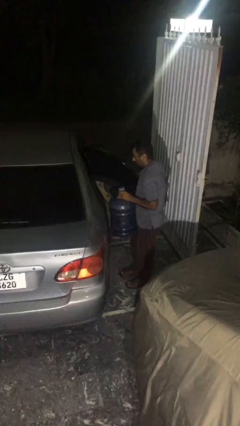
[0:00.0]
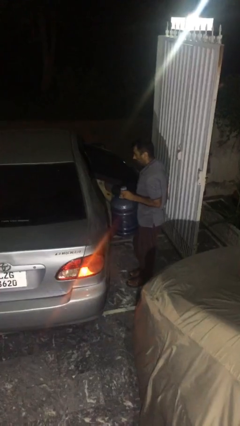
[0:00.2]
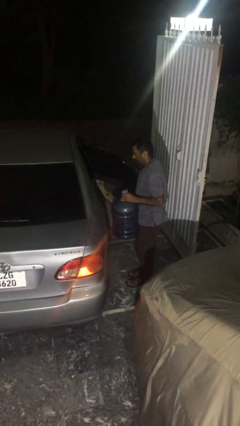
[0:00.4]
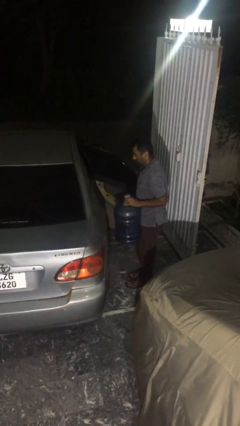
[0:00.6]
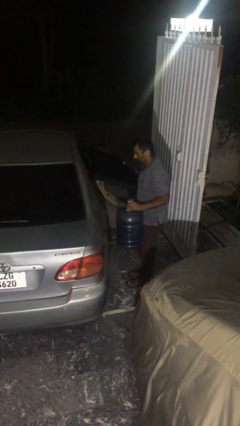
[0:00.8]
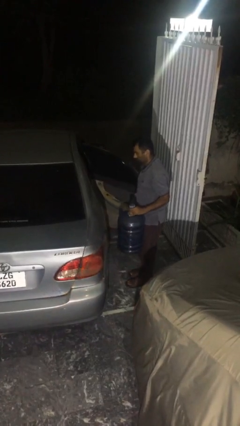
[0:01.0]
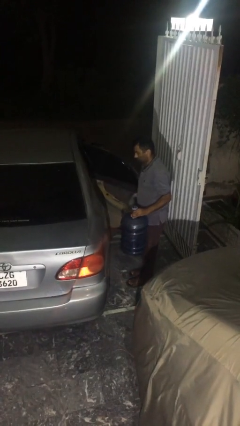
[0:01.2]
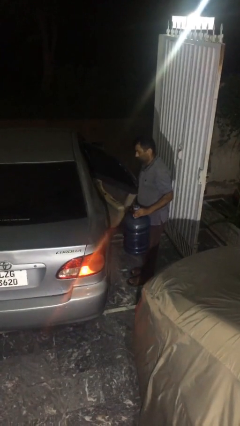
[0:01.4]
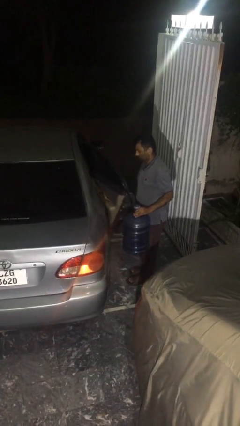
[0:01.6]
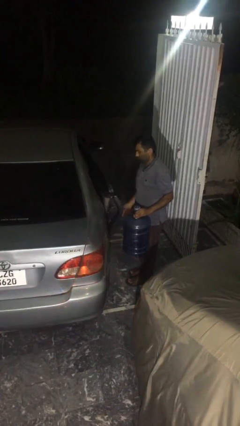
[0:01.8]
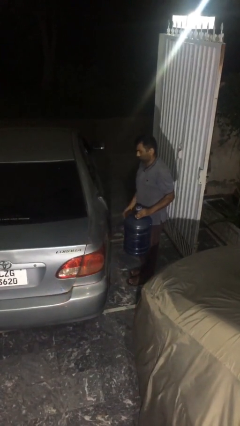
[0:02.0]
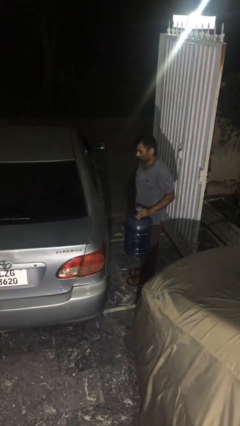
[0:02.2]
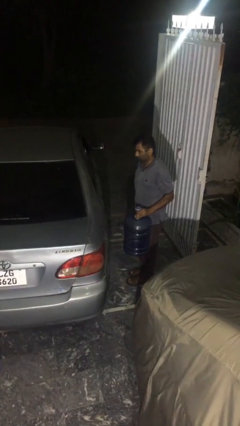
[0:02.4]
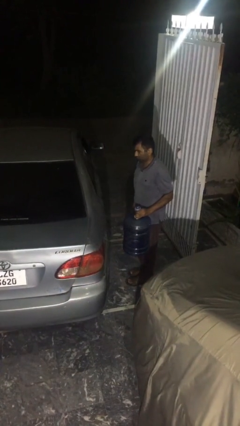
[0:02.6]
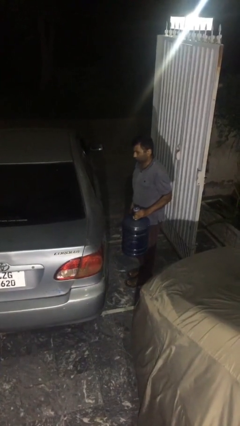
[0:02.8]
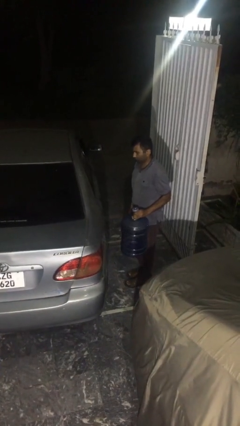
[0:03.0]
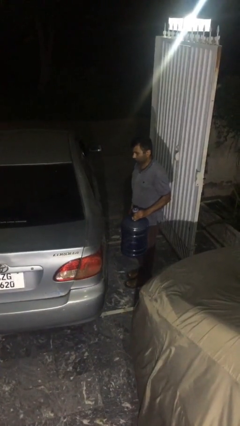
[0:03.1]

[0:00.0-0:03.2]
person closes car door

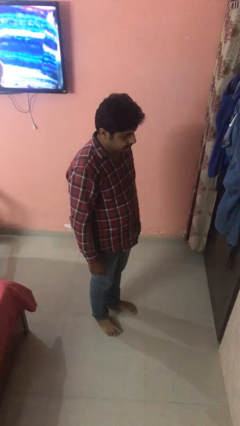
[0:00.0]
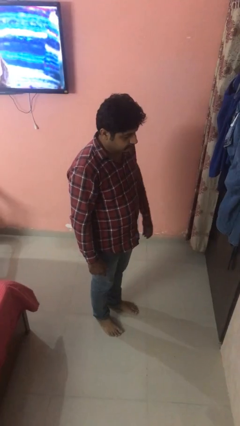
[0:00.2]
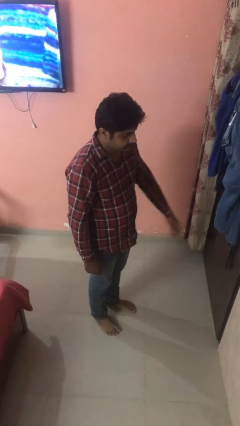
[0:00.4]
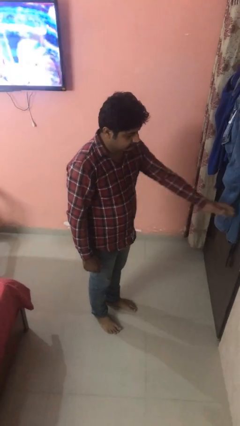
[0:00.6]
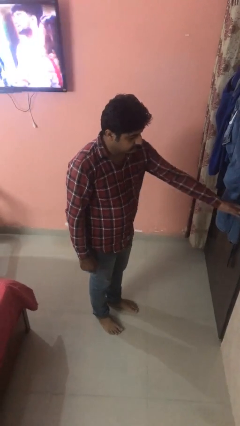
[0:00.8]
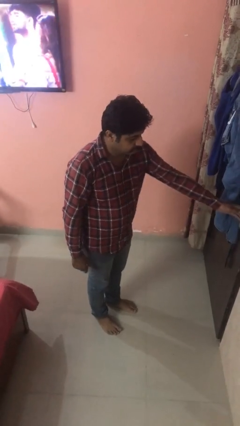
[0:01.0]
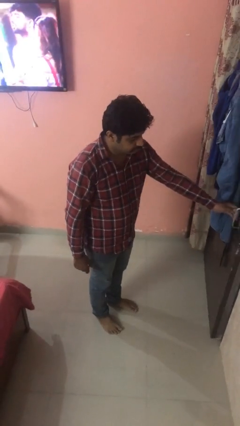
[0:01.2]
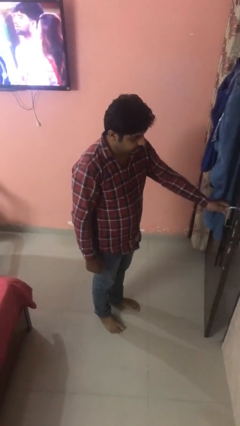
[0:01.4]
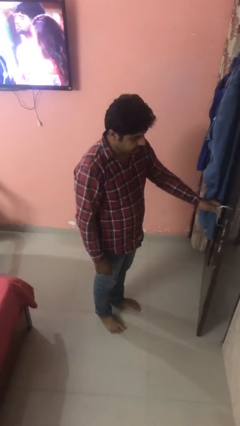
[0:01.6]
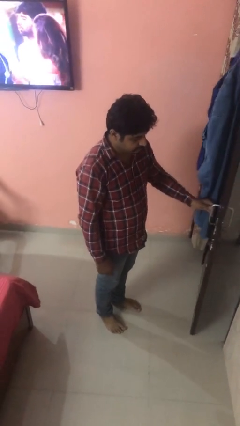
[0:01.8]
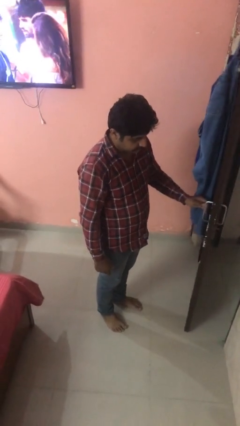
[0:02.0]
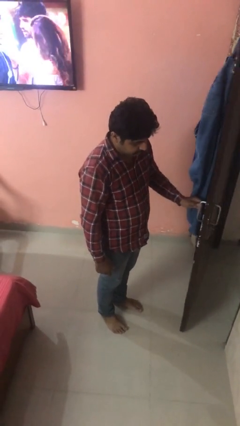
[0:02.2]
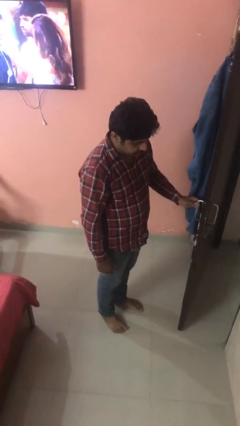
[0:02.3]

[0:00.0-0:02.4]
person opens facility door

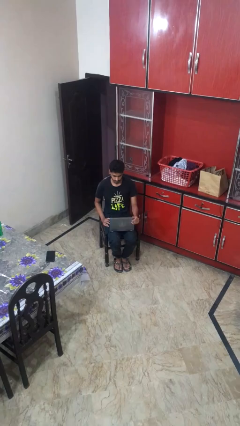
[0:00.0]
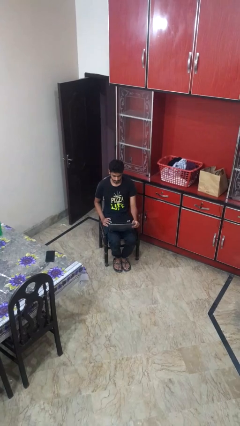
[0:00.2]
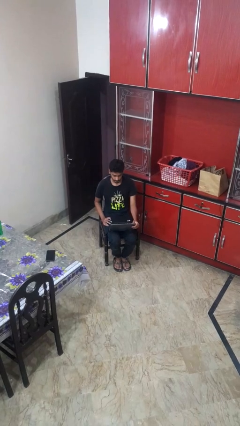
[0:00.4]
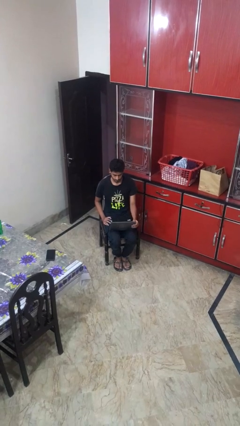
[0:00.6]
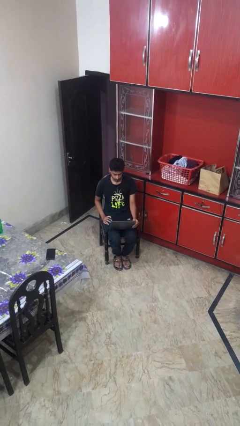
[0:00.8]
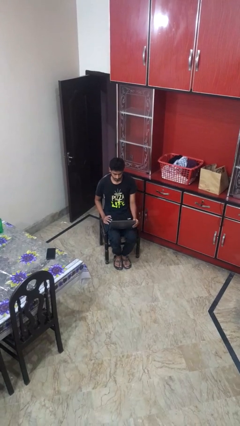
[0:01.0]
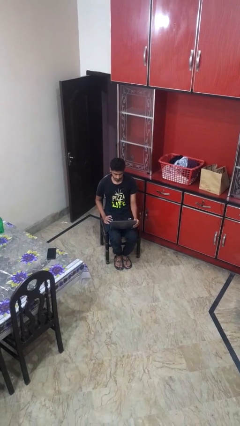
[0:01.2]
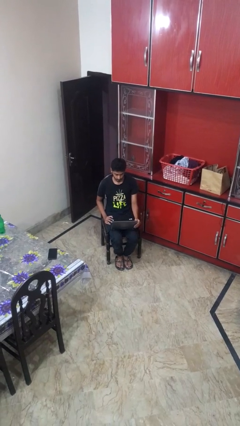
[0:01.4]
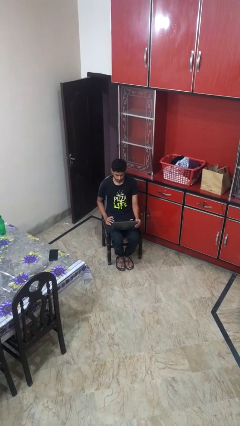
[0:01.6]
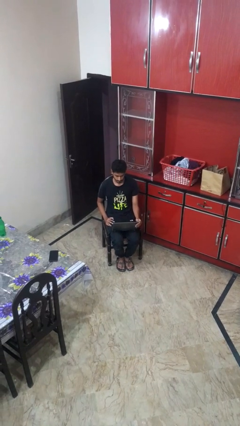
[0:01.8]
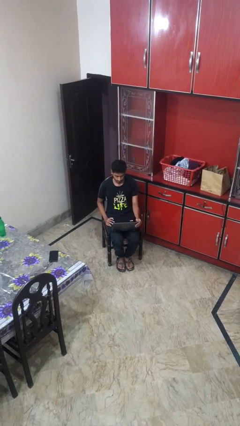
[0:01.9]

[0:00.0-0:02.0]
person opens laptop

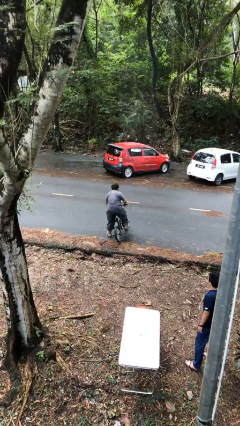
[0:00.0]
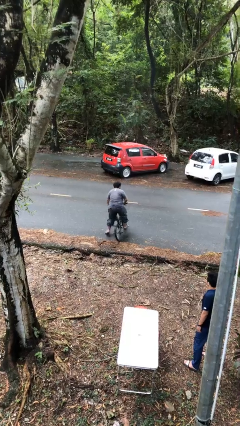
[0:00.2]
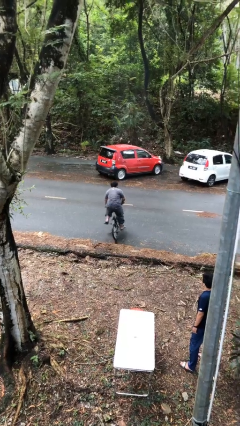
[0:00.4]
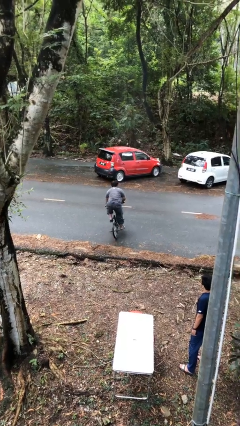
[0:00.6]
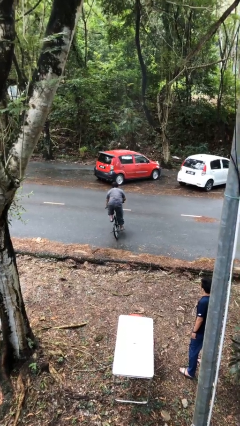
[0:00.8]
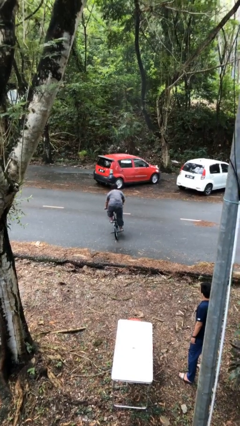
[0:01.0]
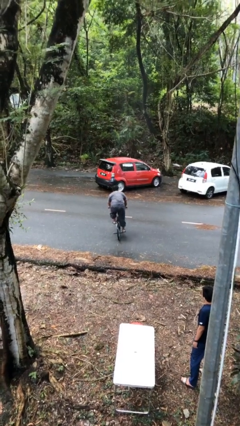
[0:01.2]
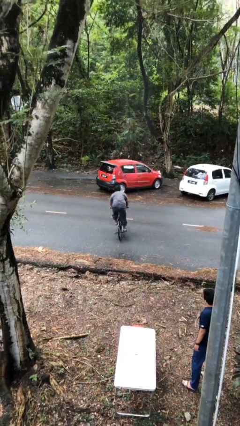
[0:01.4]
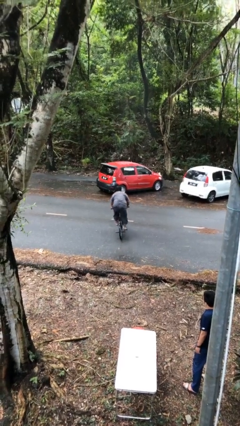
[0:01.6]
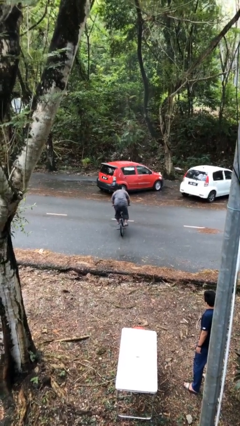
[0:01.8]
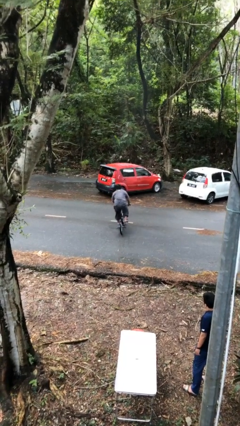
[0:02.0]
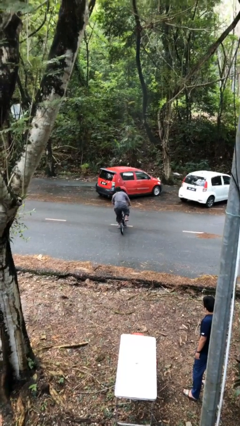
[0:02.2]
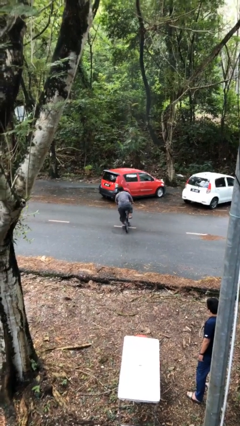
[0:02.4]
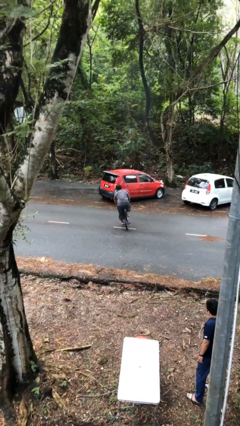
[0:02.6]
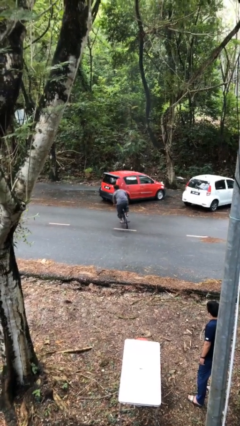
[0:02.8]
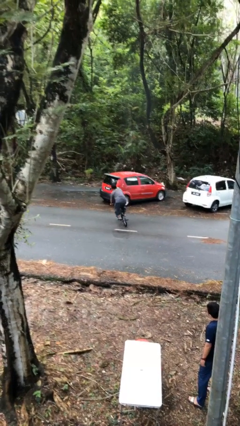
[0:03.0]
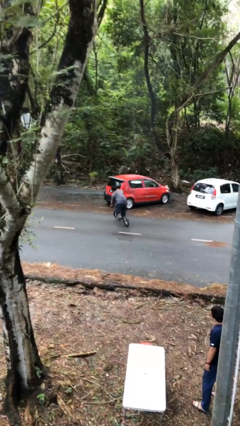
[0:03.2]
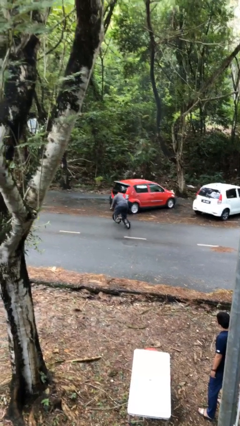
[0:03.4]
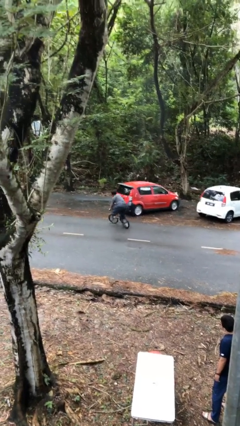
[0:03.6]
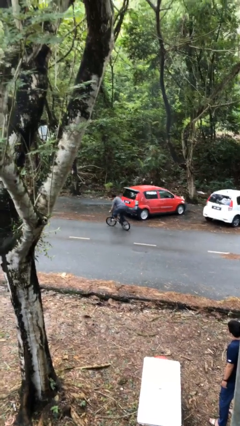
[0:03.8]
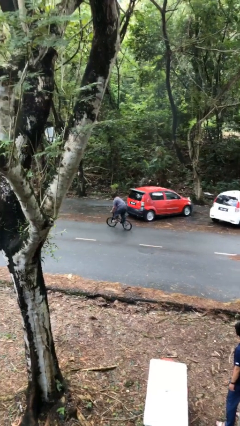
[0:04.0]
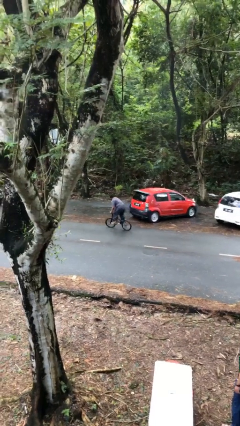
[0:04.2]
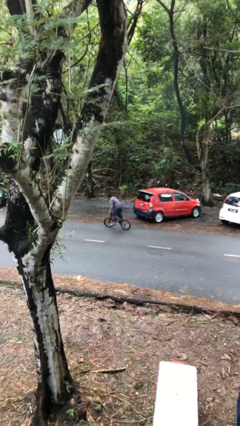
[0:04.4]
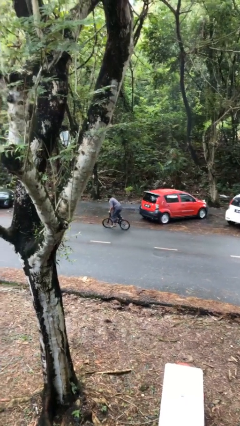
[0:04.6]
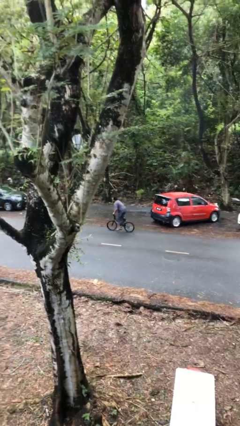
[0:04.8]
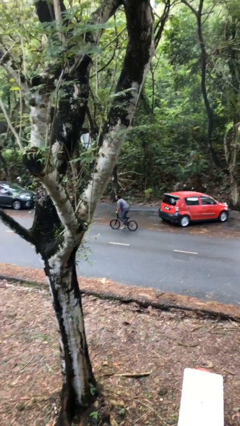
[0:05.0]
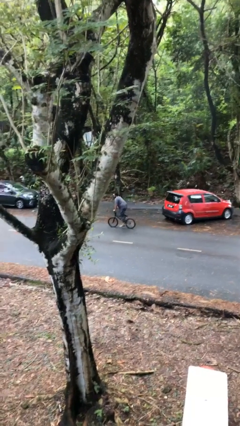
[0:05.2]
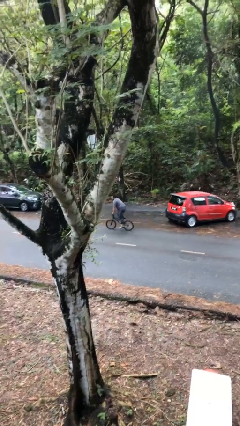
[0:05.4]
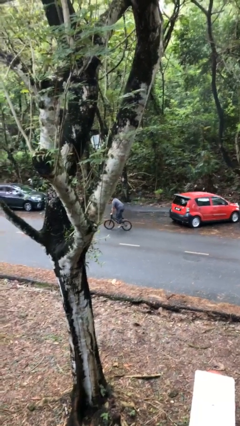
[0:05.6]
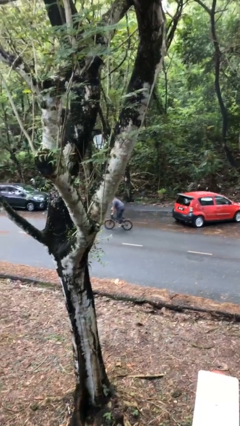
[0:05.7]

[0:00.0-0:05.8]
person rides bicycle

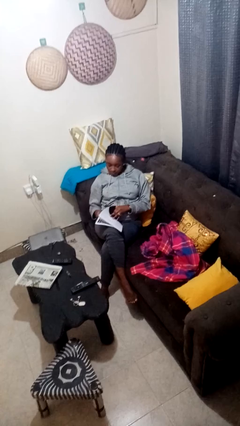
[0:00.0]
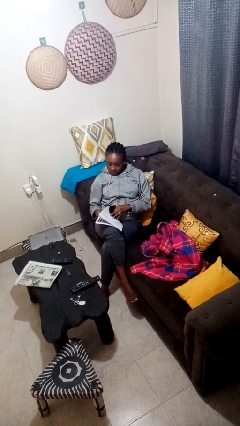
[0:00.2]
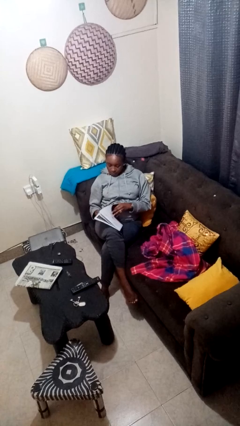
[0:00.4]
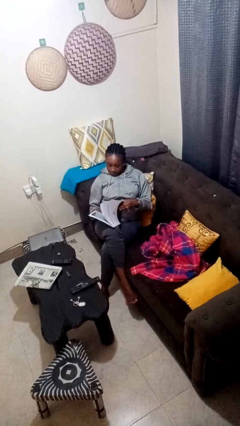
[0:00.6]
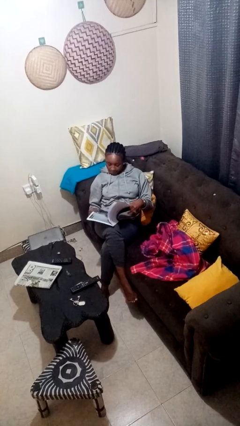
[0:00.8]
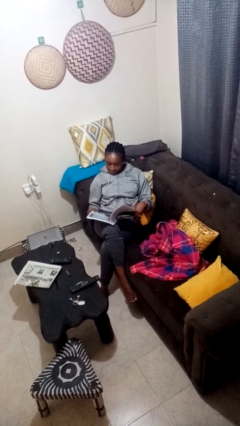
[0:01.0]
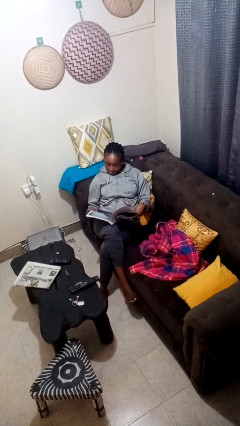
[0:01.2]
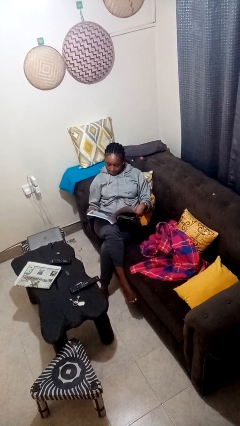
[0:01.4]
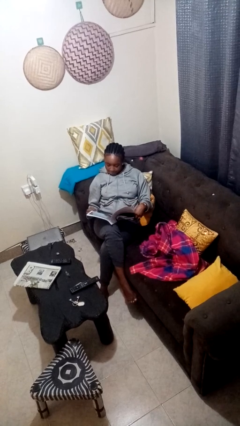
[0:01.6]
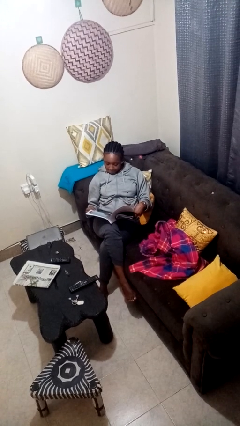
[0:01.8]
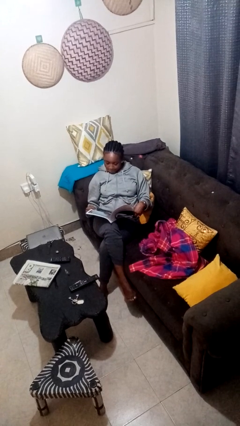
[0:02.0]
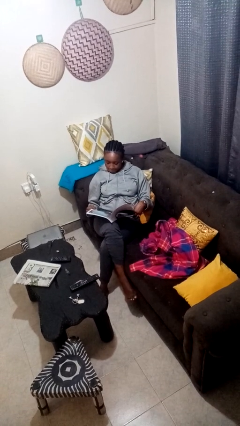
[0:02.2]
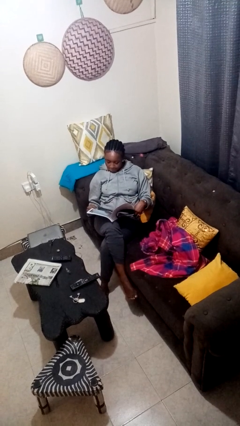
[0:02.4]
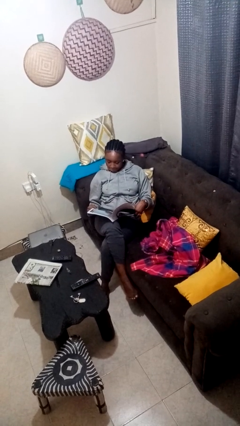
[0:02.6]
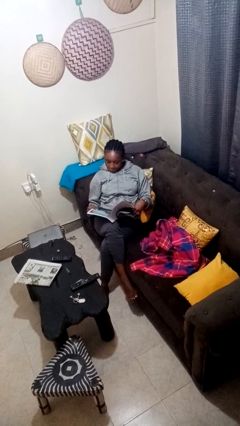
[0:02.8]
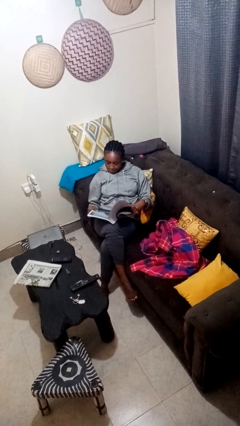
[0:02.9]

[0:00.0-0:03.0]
person reads magazine

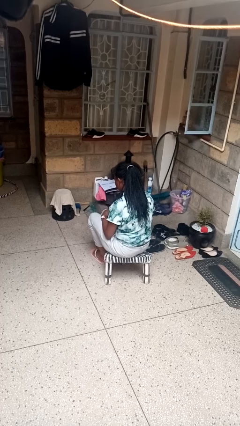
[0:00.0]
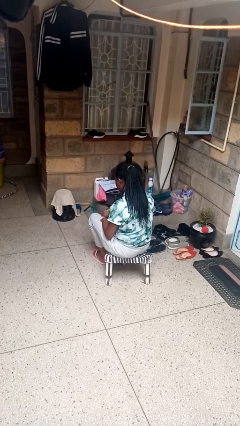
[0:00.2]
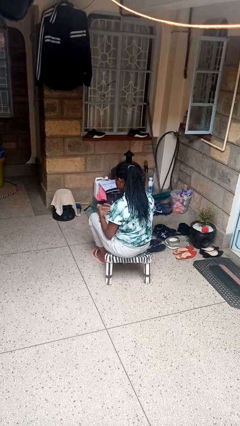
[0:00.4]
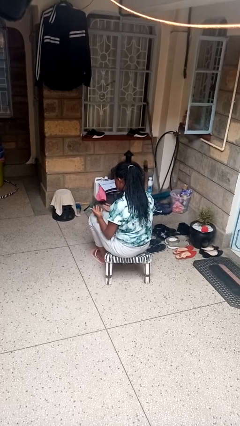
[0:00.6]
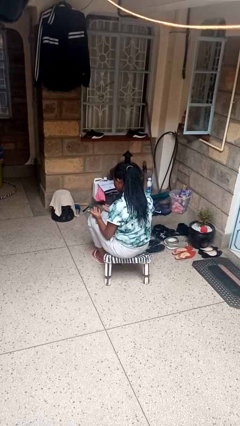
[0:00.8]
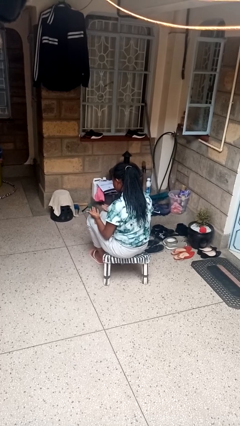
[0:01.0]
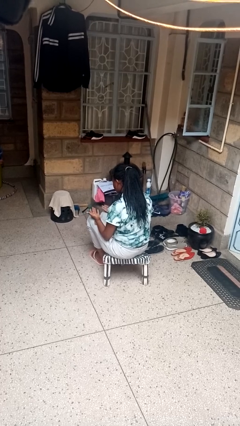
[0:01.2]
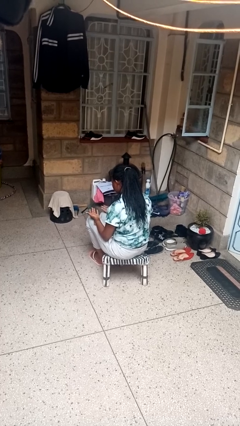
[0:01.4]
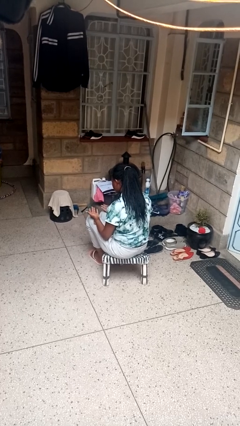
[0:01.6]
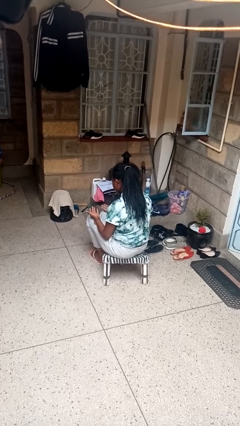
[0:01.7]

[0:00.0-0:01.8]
person looks at hands in lap
